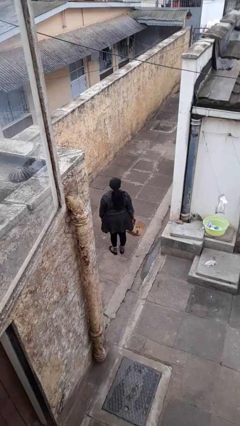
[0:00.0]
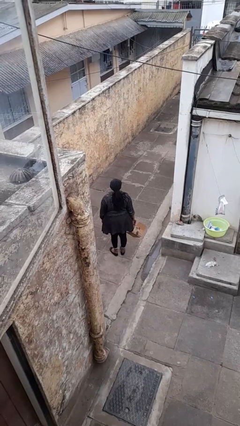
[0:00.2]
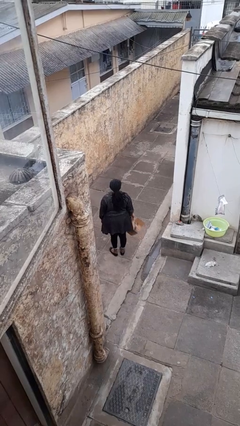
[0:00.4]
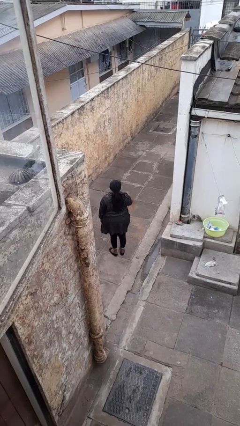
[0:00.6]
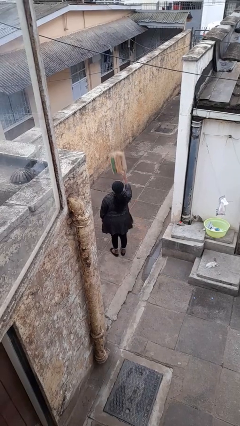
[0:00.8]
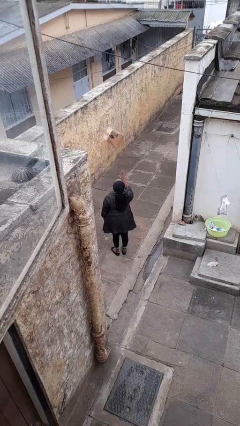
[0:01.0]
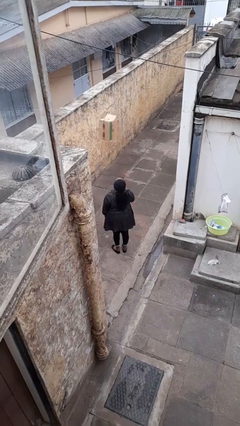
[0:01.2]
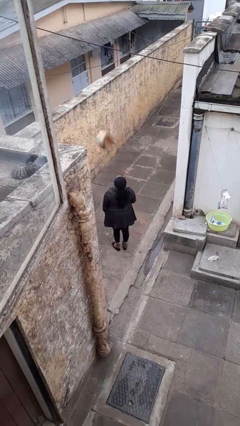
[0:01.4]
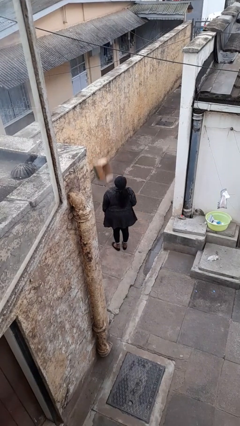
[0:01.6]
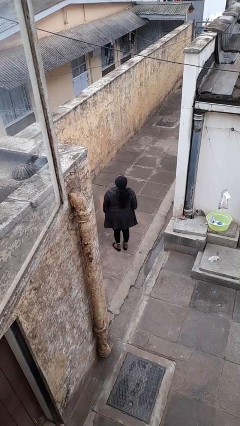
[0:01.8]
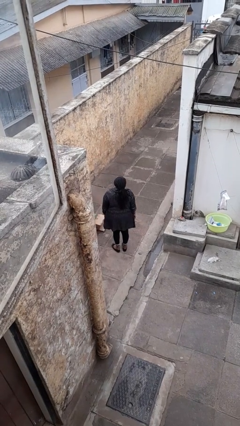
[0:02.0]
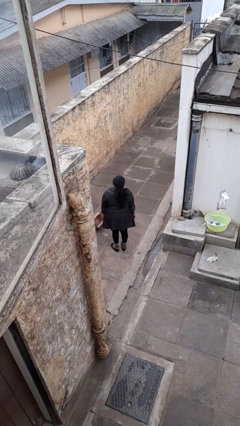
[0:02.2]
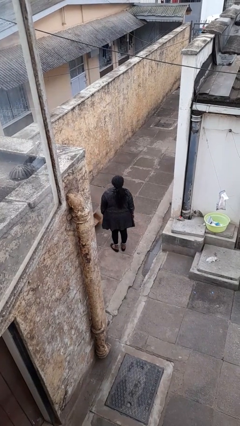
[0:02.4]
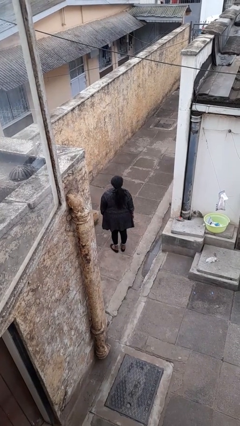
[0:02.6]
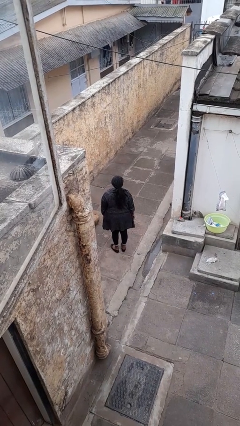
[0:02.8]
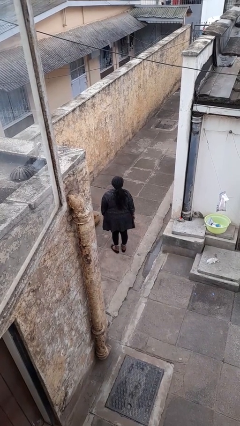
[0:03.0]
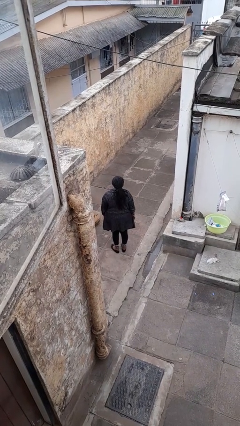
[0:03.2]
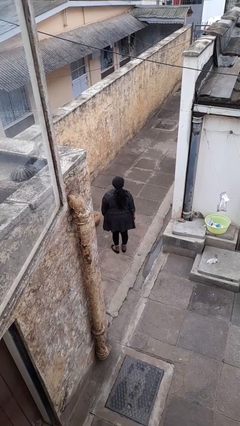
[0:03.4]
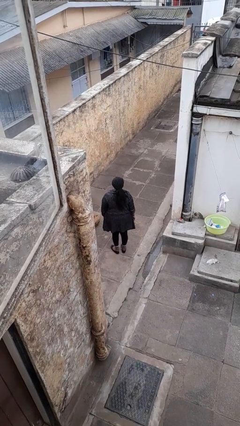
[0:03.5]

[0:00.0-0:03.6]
person throws object into air

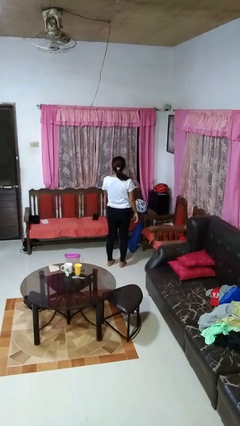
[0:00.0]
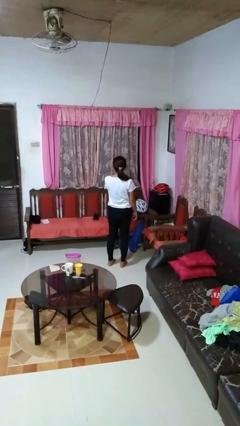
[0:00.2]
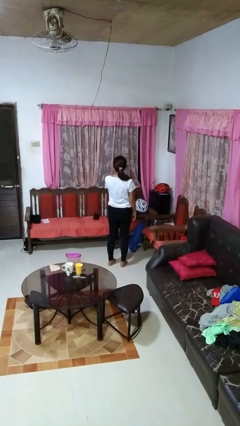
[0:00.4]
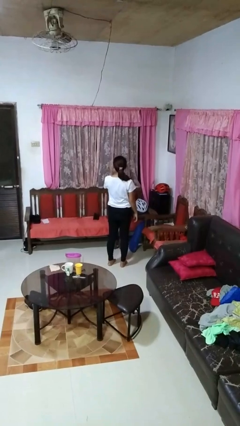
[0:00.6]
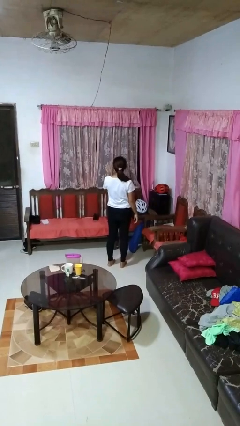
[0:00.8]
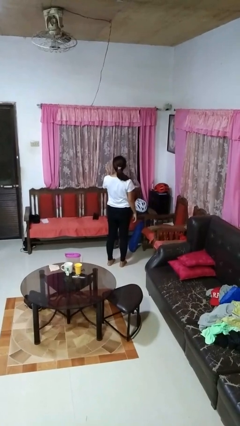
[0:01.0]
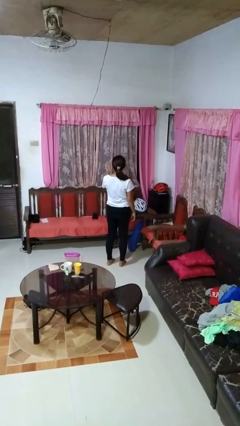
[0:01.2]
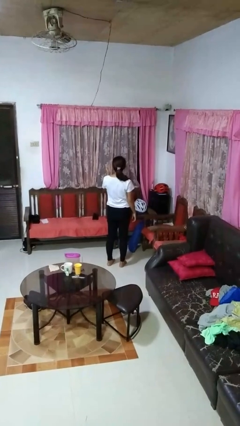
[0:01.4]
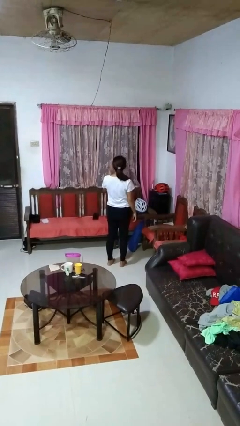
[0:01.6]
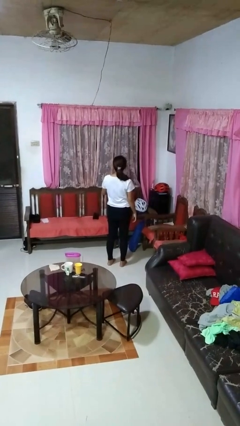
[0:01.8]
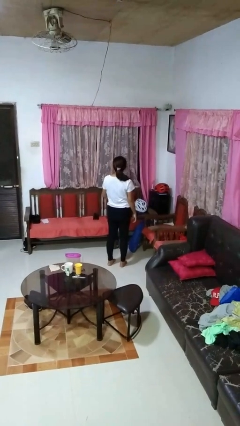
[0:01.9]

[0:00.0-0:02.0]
person gestures blow kiss

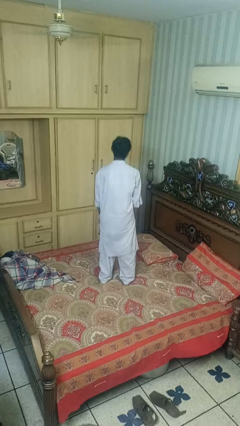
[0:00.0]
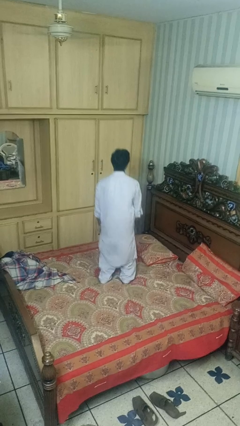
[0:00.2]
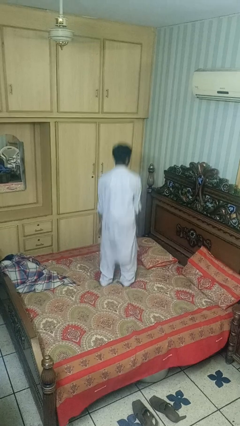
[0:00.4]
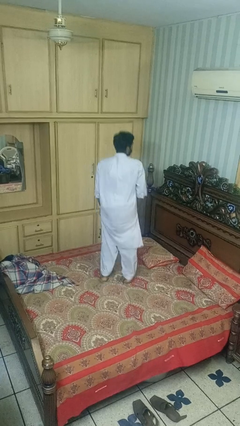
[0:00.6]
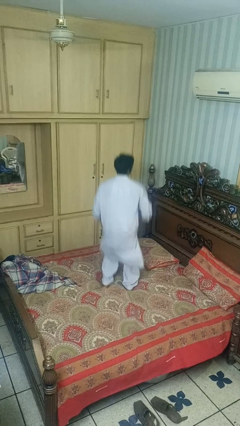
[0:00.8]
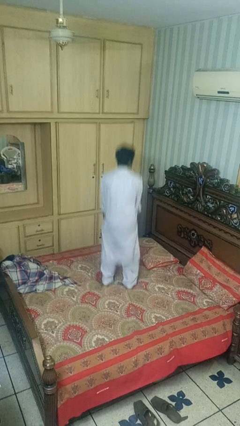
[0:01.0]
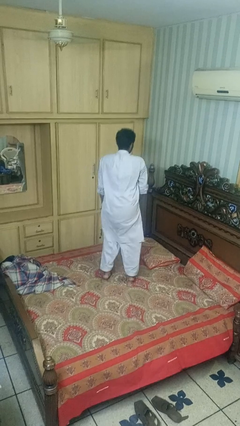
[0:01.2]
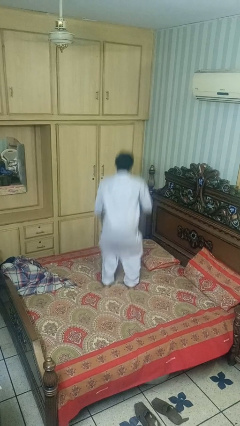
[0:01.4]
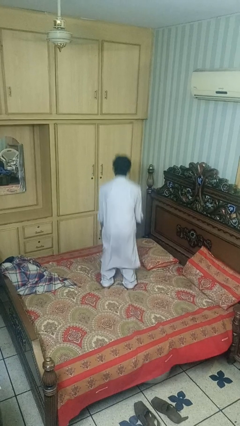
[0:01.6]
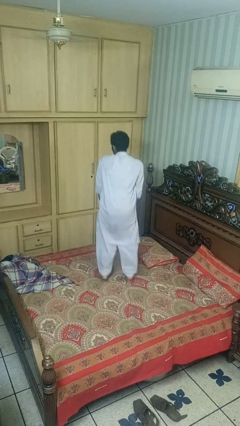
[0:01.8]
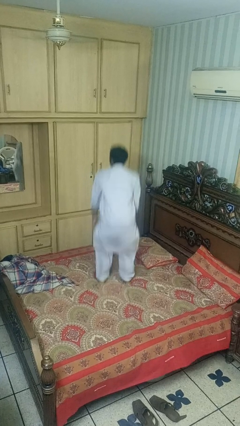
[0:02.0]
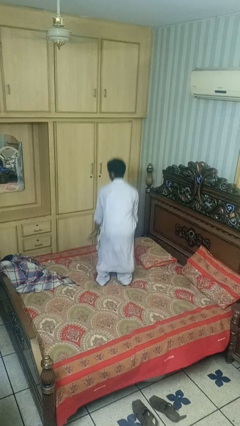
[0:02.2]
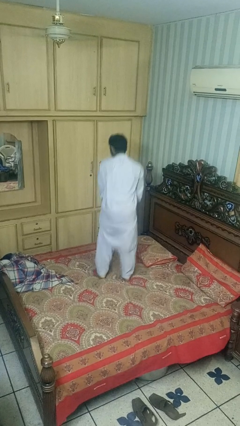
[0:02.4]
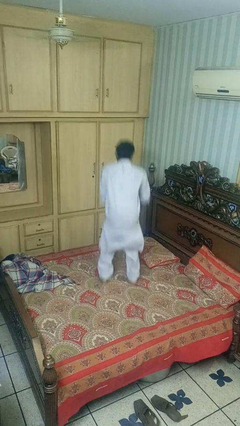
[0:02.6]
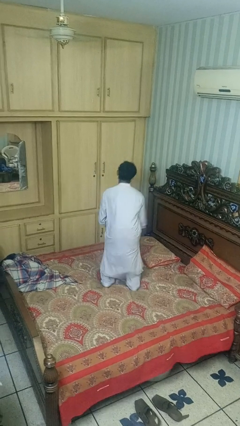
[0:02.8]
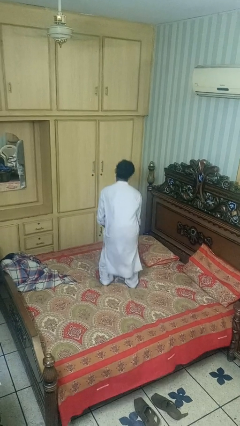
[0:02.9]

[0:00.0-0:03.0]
person jumps on bed

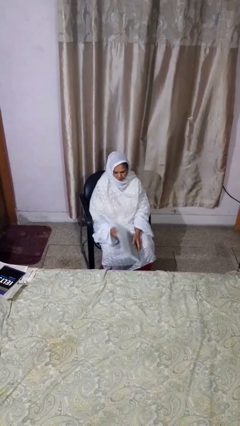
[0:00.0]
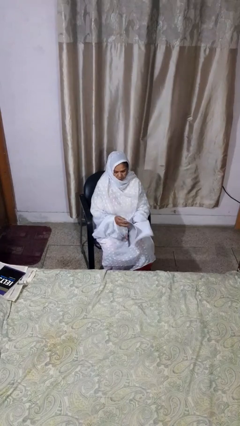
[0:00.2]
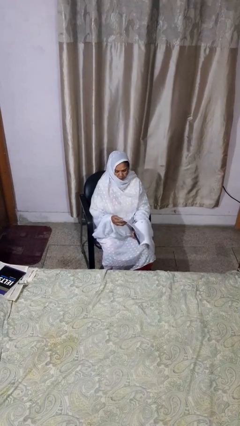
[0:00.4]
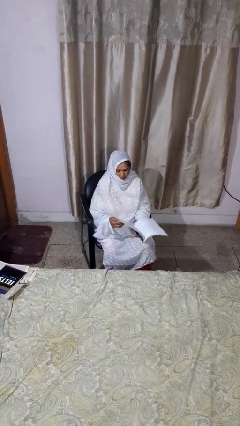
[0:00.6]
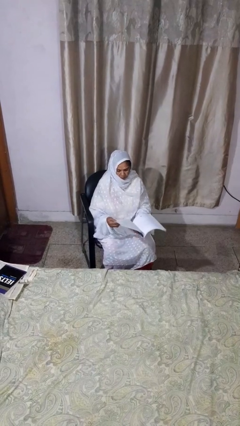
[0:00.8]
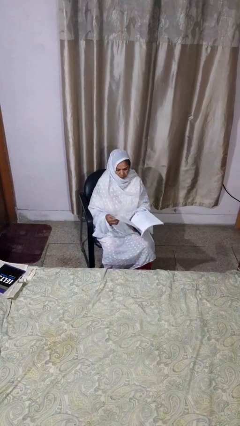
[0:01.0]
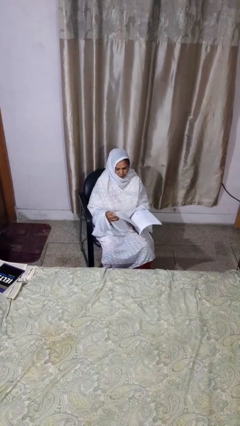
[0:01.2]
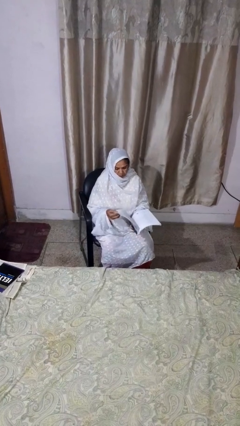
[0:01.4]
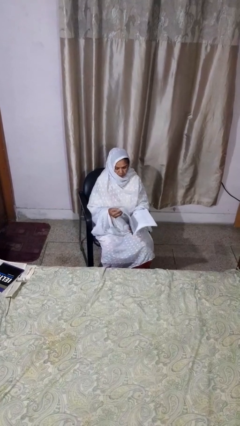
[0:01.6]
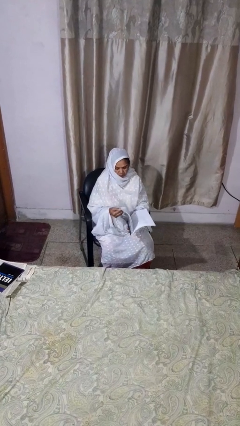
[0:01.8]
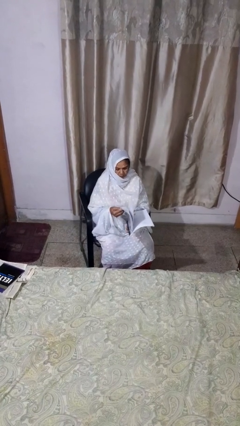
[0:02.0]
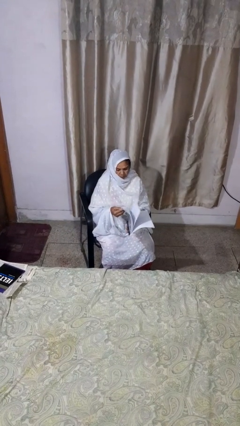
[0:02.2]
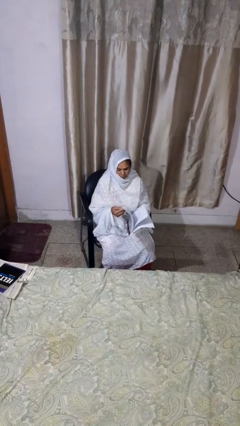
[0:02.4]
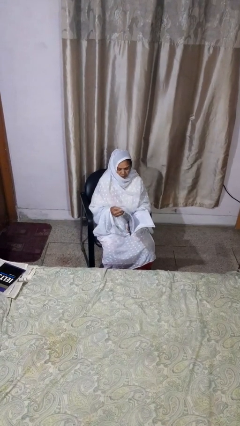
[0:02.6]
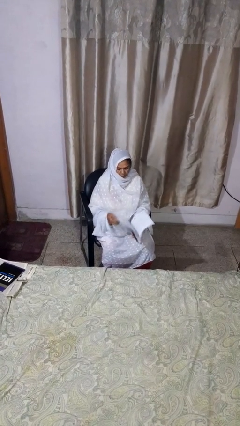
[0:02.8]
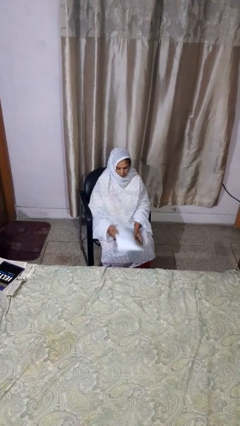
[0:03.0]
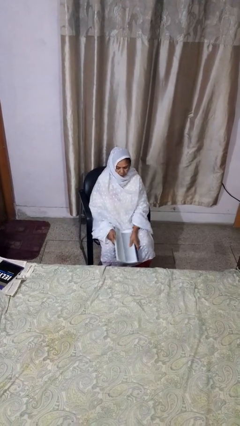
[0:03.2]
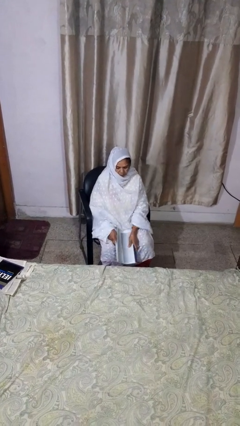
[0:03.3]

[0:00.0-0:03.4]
person reads magazine

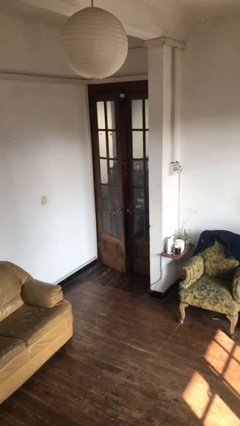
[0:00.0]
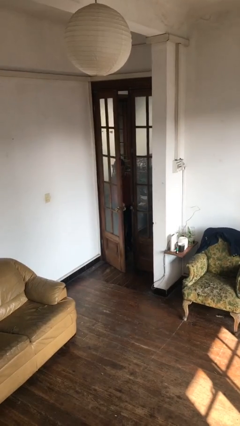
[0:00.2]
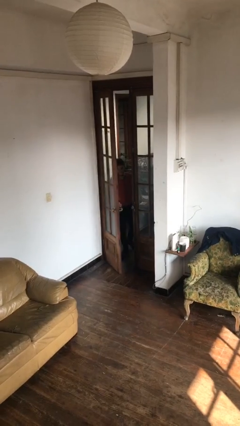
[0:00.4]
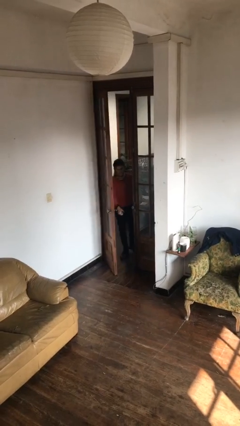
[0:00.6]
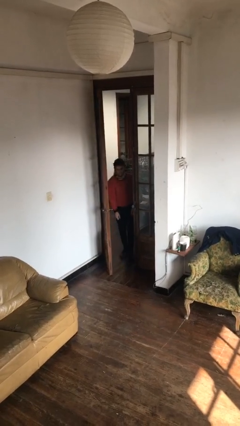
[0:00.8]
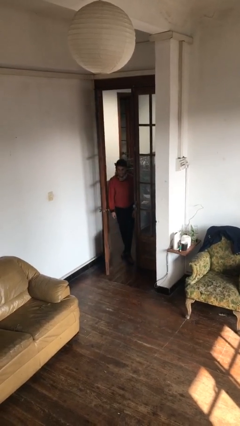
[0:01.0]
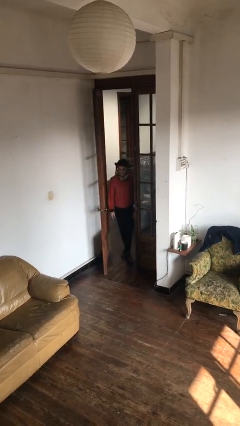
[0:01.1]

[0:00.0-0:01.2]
person opens facility door

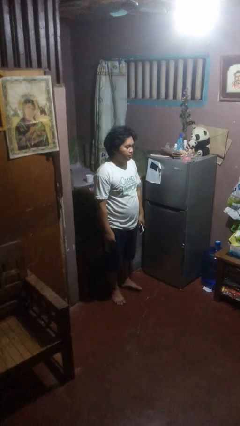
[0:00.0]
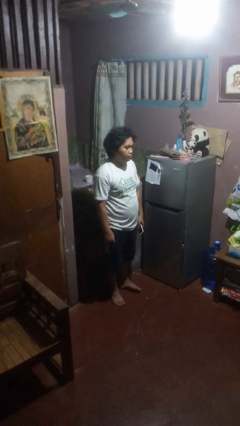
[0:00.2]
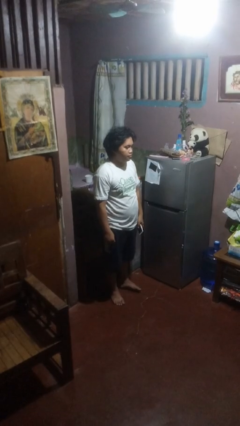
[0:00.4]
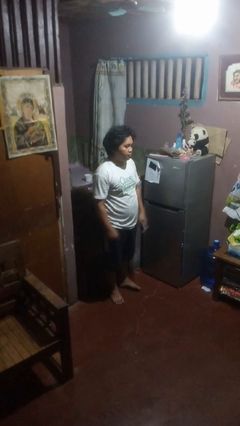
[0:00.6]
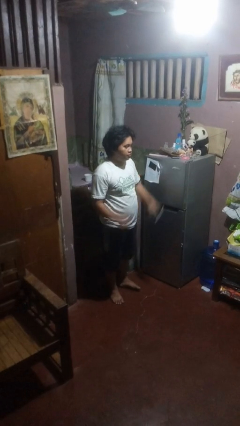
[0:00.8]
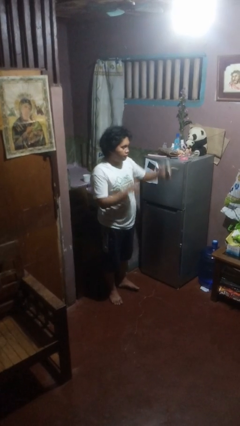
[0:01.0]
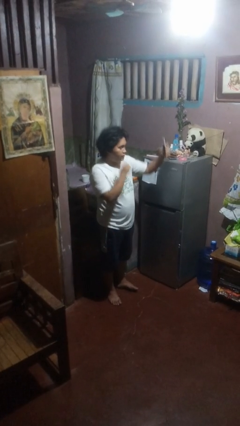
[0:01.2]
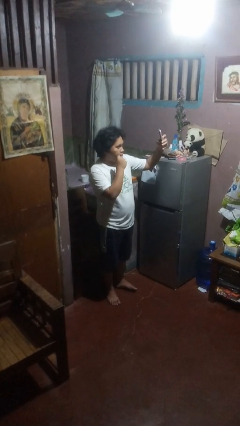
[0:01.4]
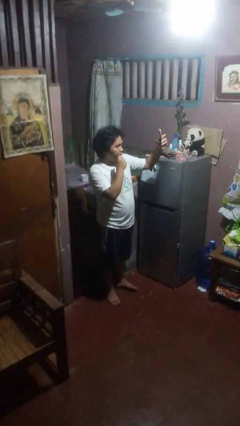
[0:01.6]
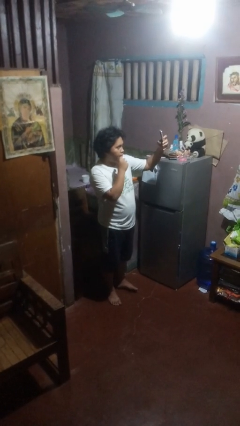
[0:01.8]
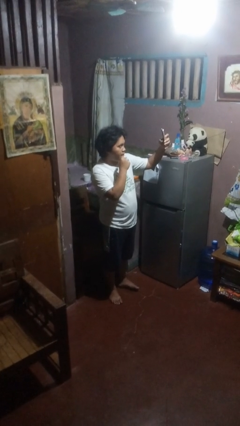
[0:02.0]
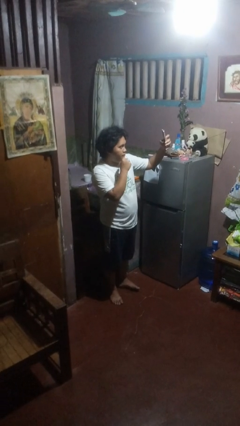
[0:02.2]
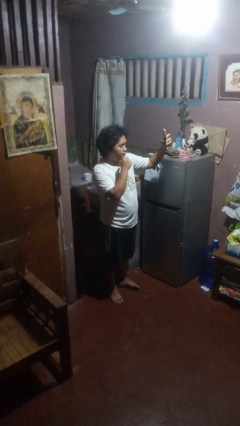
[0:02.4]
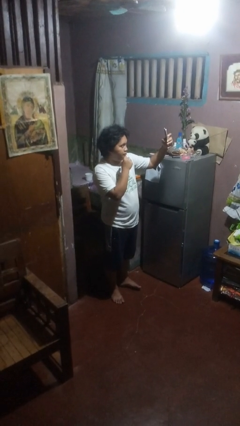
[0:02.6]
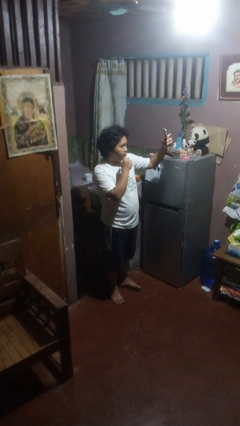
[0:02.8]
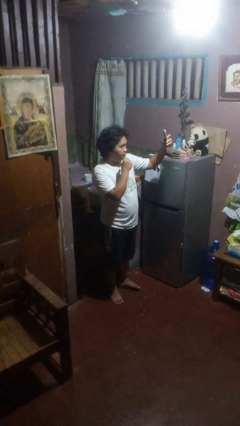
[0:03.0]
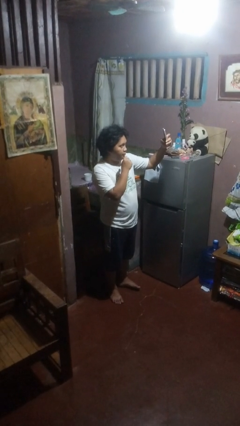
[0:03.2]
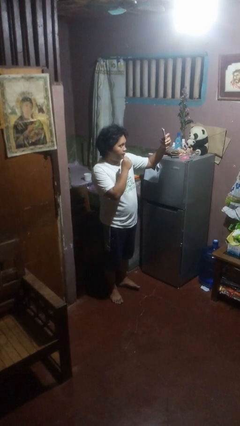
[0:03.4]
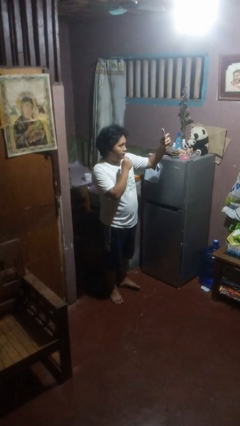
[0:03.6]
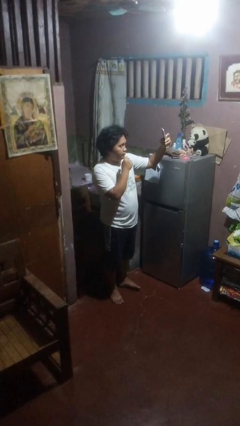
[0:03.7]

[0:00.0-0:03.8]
person takes selfie

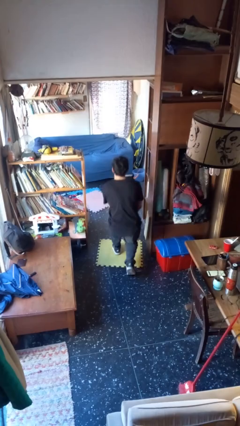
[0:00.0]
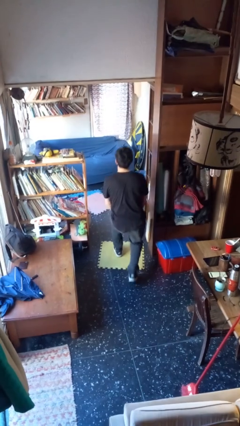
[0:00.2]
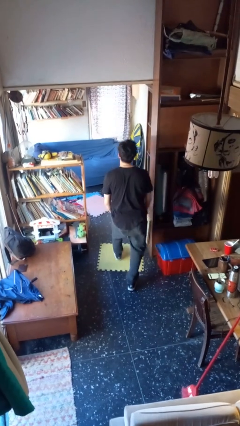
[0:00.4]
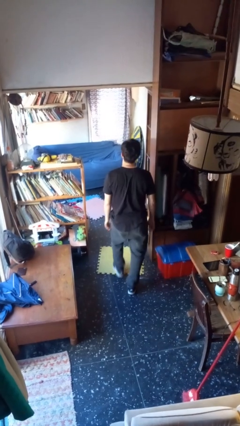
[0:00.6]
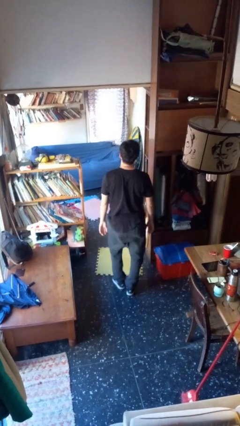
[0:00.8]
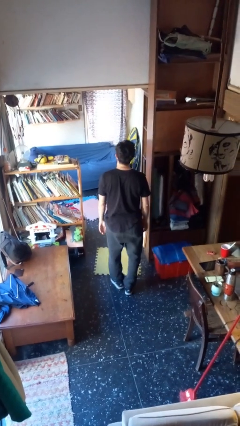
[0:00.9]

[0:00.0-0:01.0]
person stands up from floor
